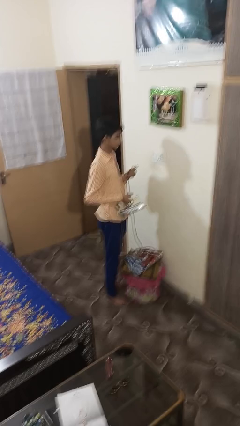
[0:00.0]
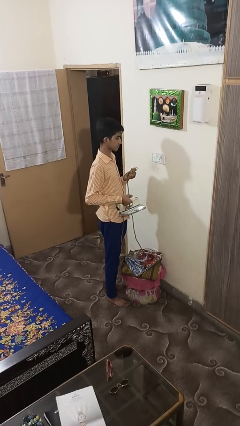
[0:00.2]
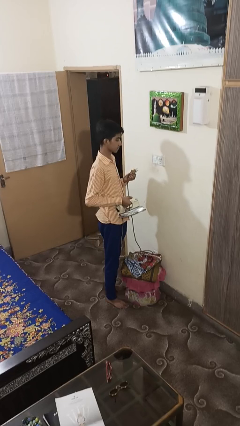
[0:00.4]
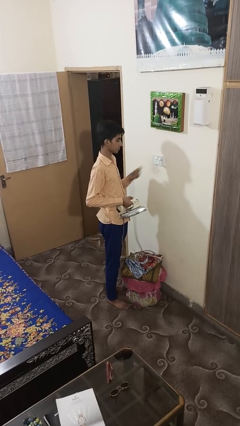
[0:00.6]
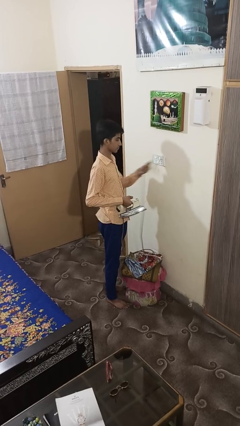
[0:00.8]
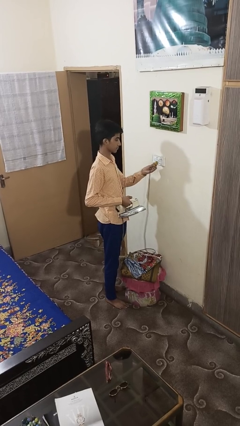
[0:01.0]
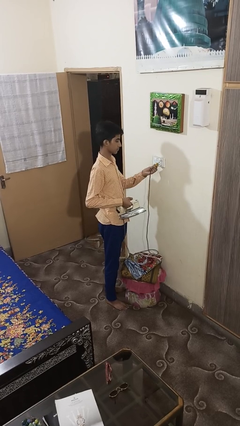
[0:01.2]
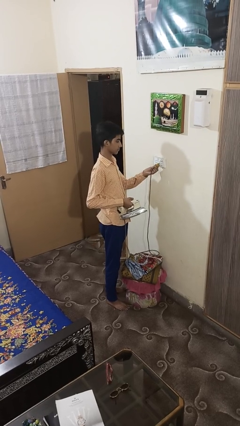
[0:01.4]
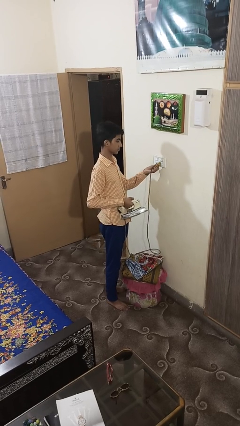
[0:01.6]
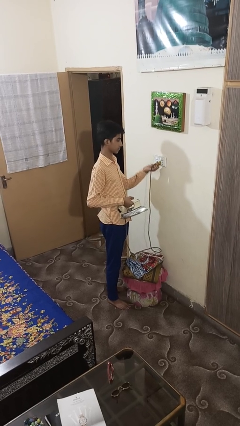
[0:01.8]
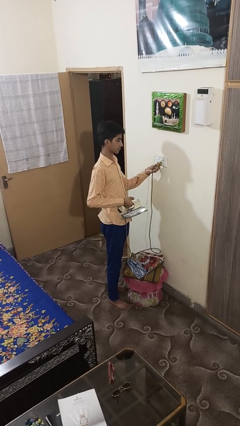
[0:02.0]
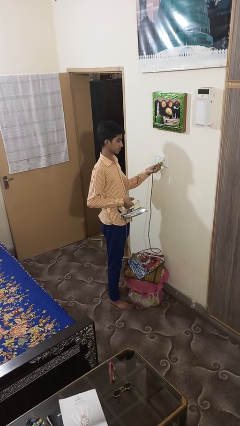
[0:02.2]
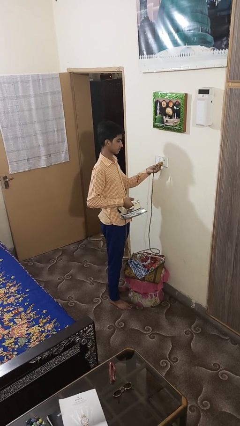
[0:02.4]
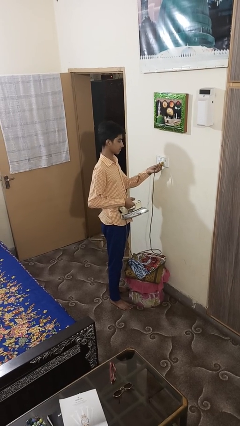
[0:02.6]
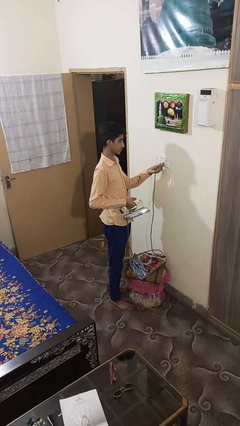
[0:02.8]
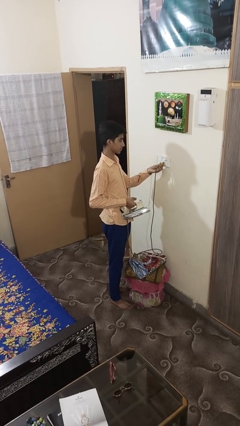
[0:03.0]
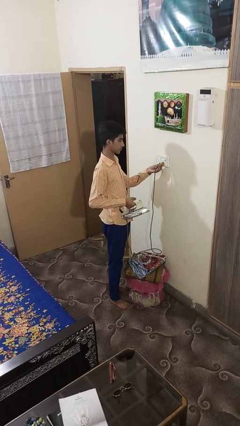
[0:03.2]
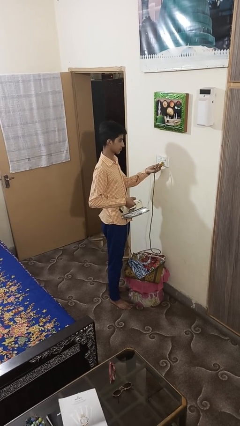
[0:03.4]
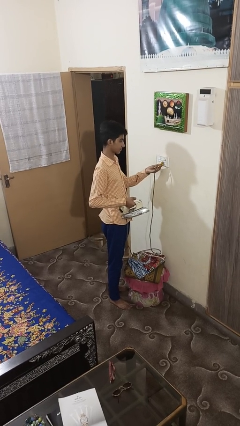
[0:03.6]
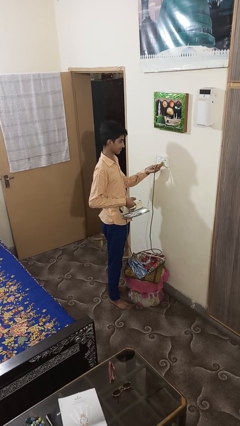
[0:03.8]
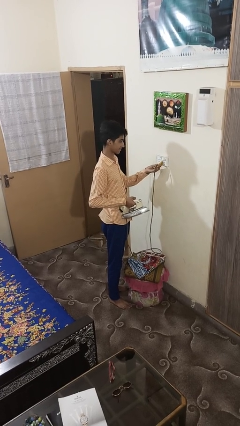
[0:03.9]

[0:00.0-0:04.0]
person plugs into electrical socket

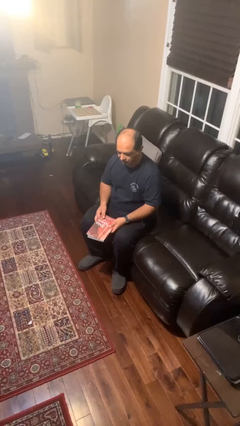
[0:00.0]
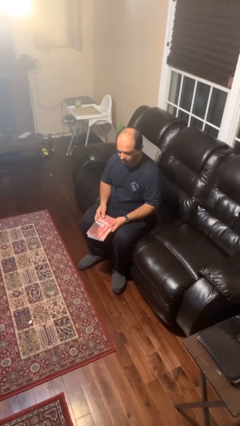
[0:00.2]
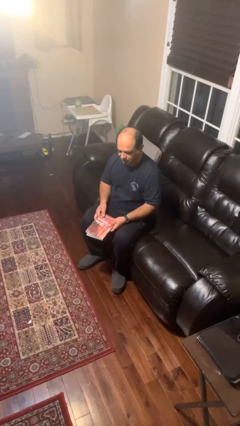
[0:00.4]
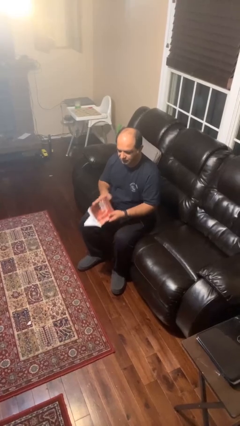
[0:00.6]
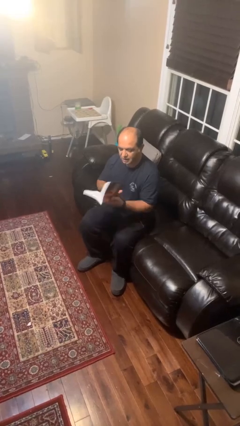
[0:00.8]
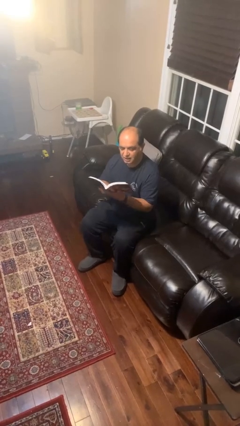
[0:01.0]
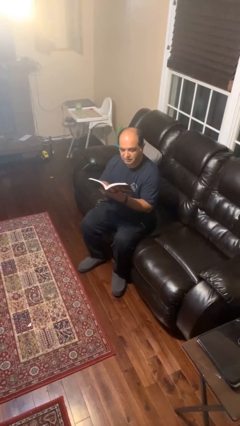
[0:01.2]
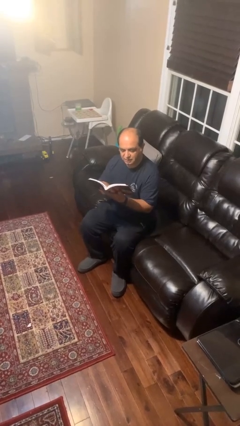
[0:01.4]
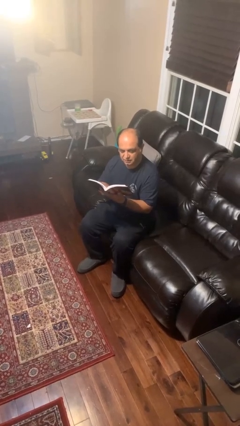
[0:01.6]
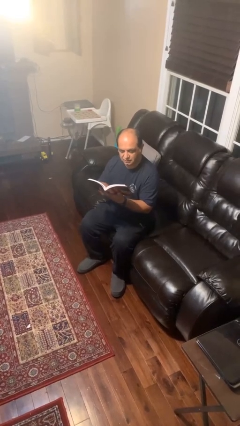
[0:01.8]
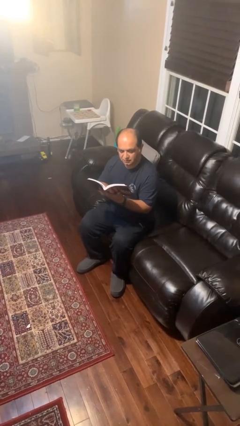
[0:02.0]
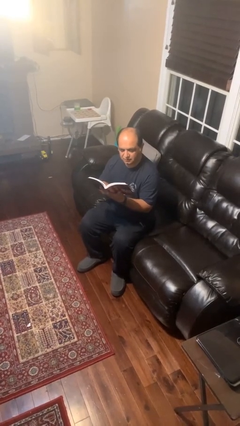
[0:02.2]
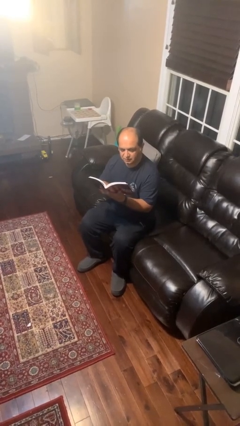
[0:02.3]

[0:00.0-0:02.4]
person reads document

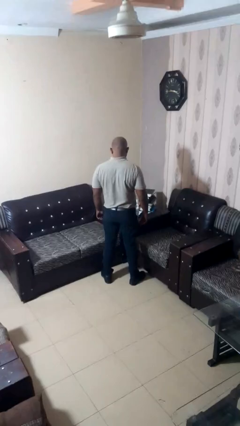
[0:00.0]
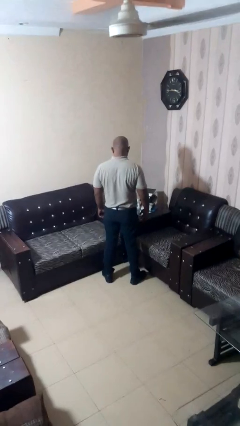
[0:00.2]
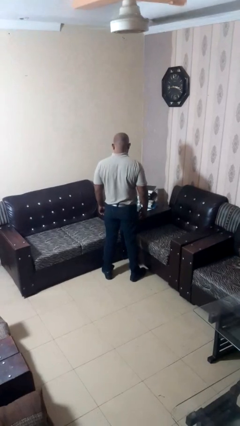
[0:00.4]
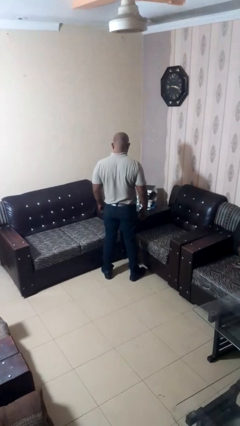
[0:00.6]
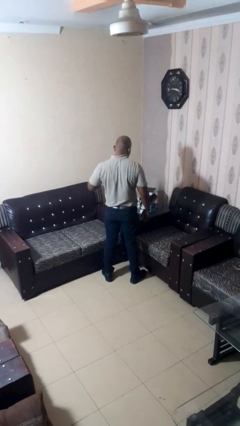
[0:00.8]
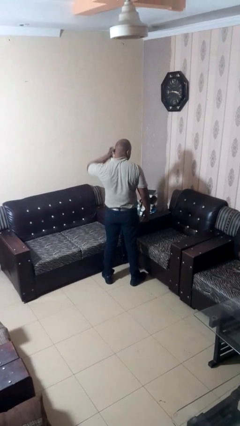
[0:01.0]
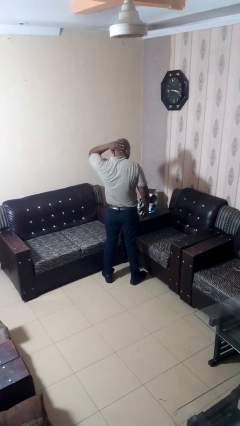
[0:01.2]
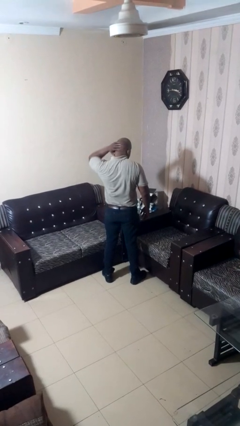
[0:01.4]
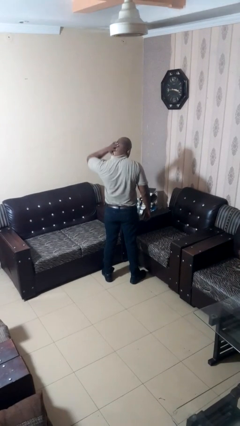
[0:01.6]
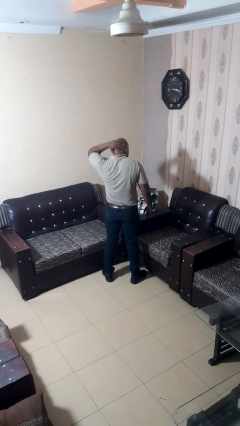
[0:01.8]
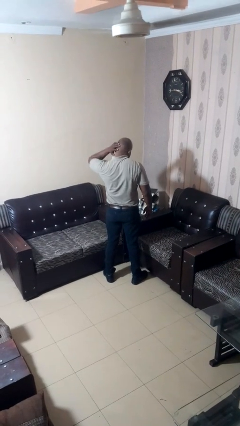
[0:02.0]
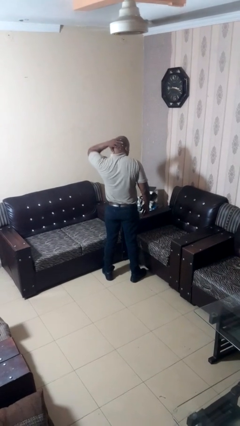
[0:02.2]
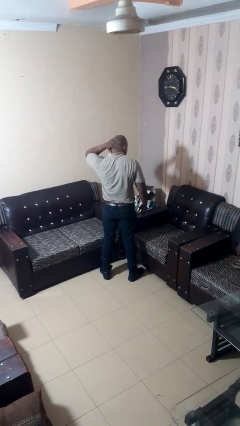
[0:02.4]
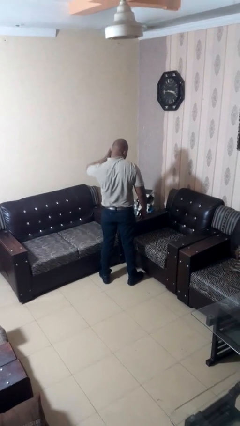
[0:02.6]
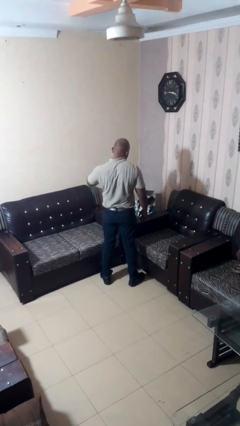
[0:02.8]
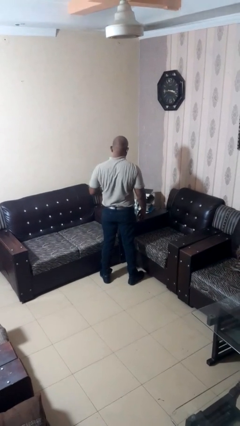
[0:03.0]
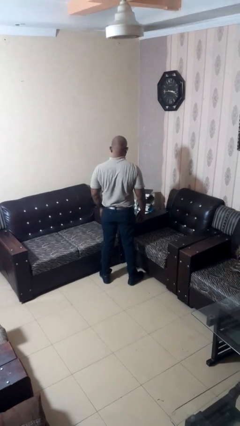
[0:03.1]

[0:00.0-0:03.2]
person rubs neck

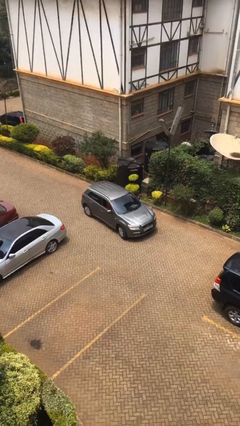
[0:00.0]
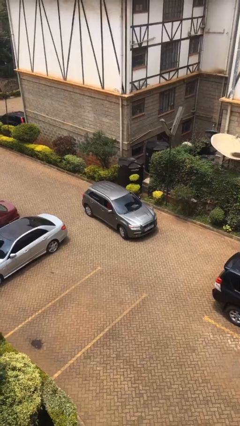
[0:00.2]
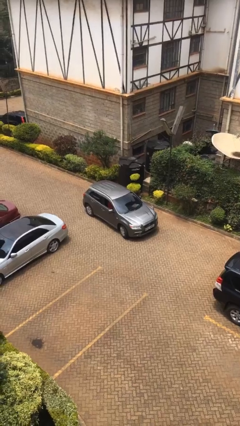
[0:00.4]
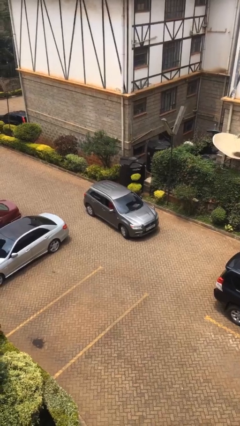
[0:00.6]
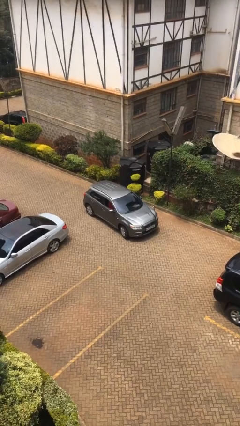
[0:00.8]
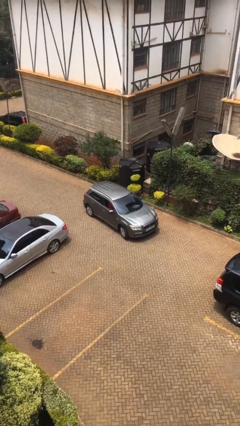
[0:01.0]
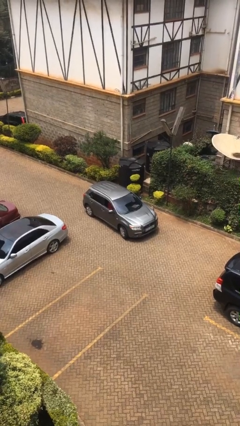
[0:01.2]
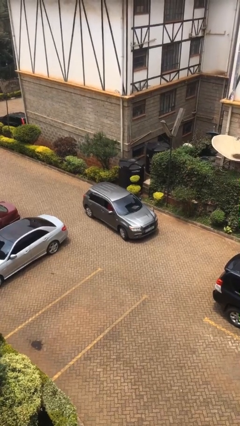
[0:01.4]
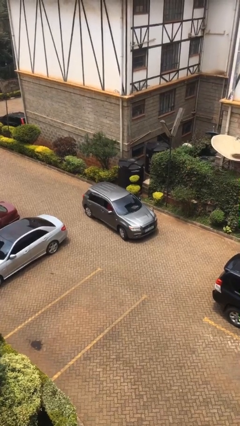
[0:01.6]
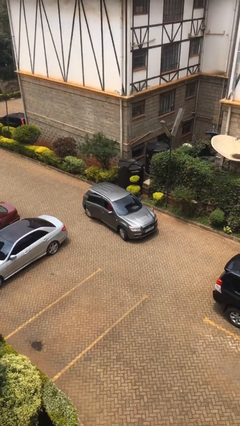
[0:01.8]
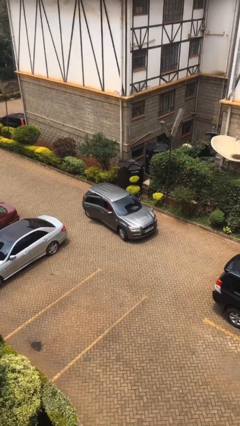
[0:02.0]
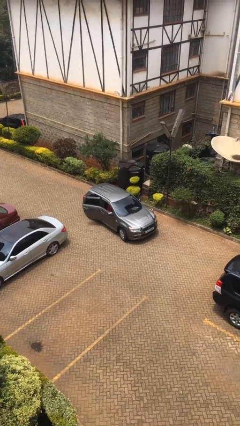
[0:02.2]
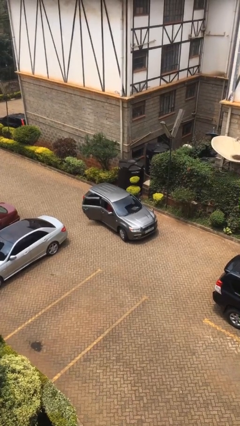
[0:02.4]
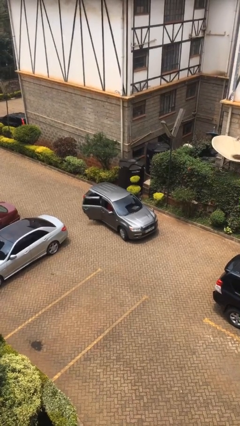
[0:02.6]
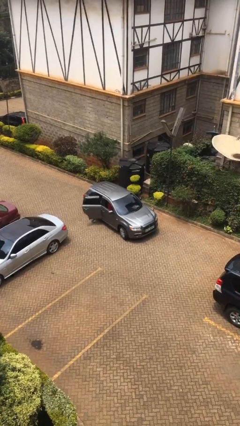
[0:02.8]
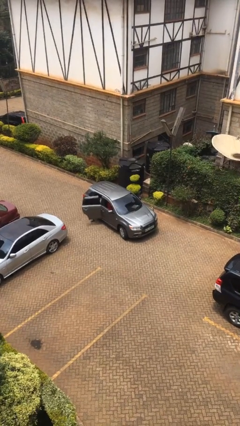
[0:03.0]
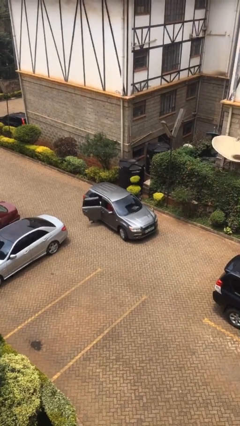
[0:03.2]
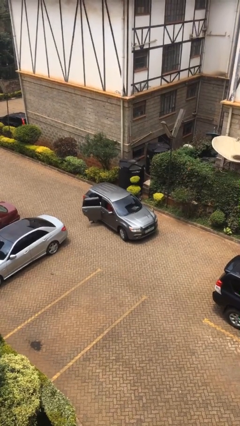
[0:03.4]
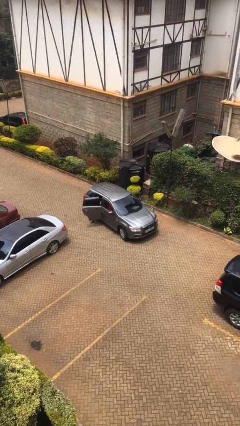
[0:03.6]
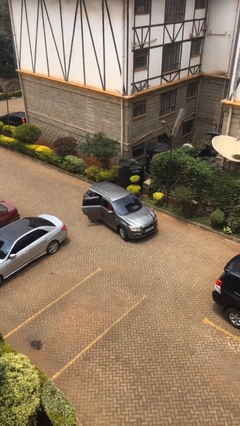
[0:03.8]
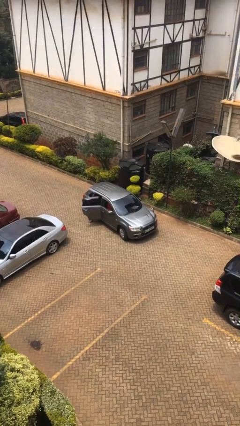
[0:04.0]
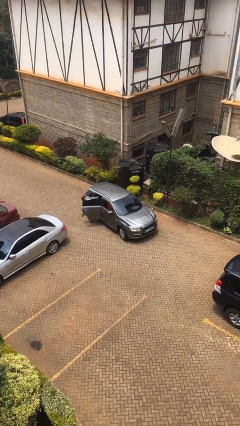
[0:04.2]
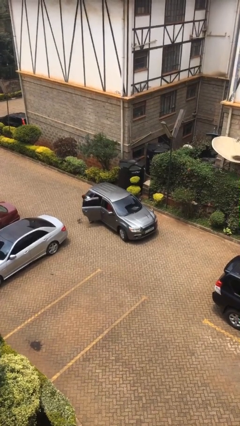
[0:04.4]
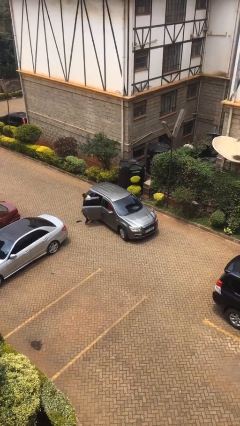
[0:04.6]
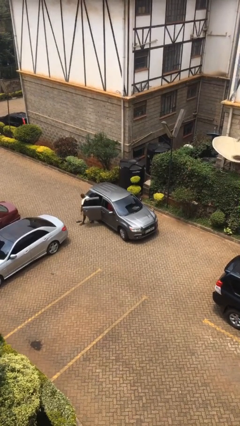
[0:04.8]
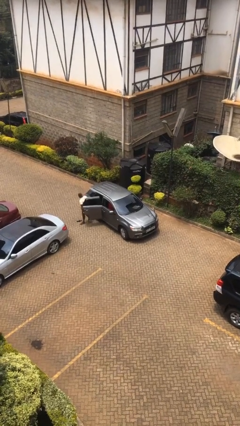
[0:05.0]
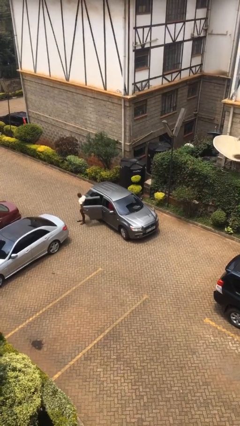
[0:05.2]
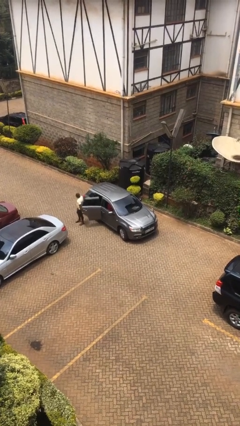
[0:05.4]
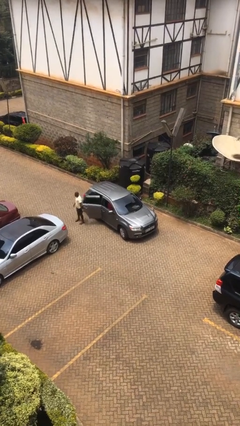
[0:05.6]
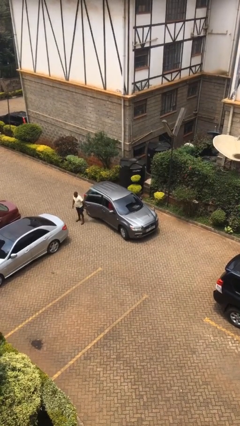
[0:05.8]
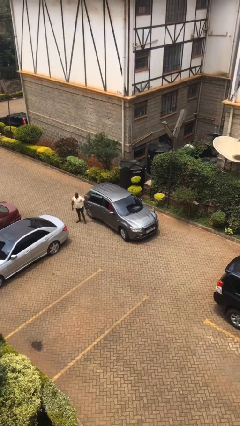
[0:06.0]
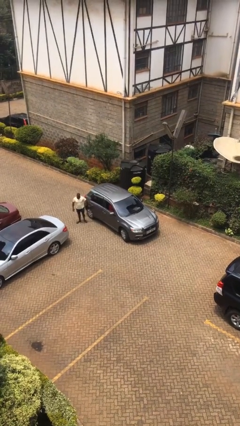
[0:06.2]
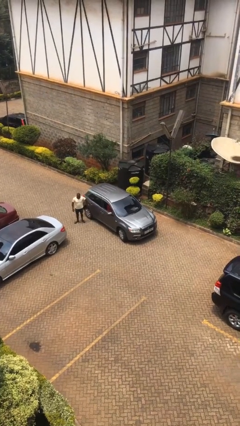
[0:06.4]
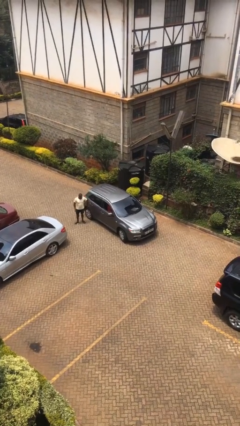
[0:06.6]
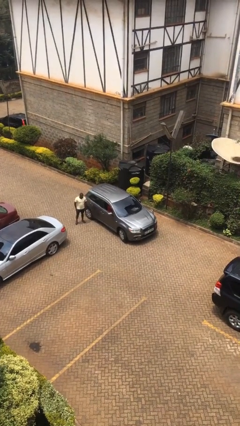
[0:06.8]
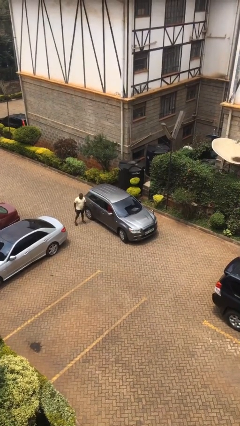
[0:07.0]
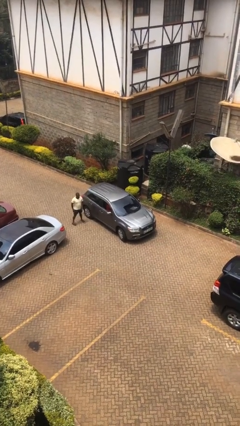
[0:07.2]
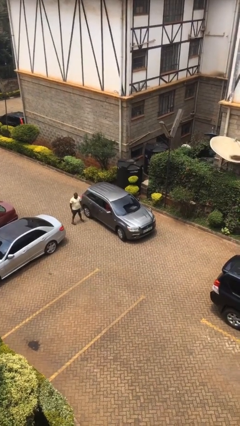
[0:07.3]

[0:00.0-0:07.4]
car drops off person

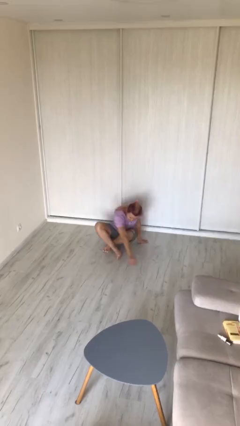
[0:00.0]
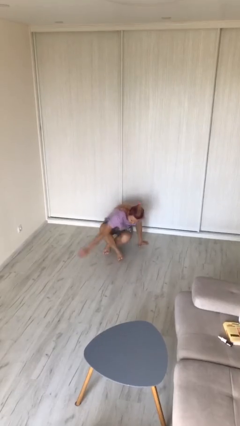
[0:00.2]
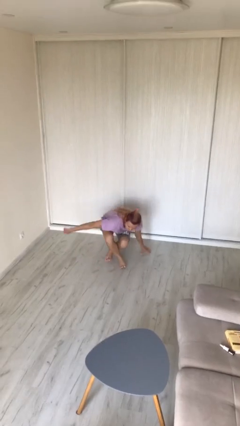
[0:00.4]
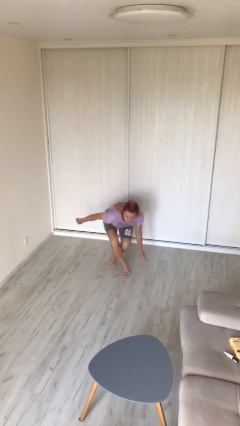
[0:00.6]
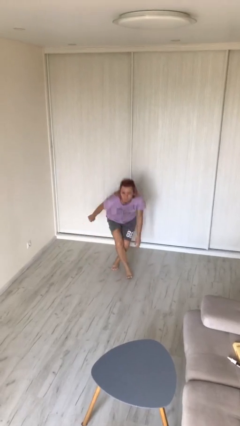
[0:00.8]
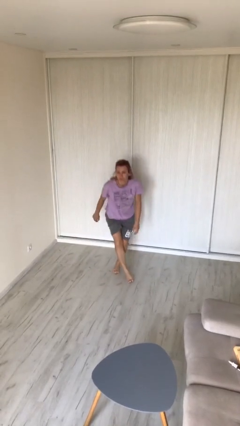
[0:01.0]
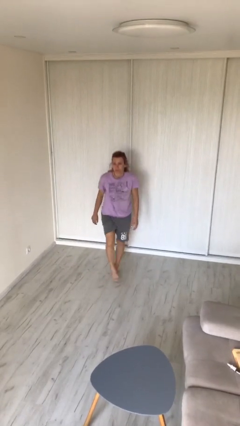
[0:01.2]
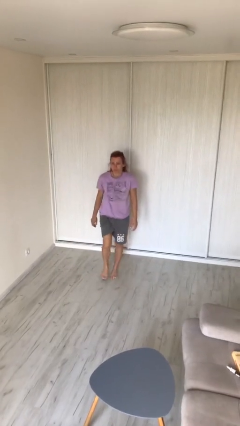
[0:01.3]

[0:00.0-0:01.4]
person stands up from floor
